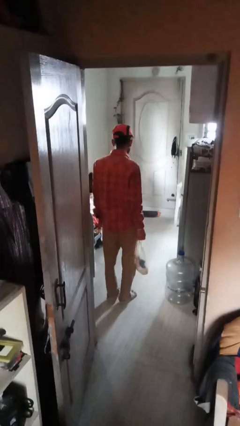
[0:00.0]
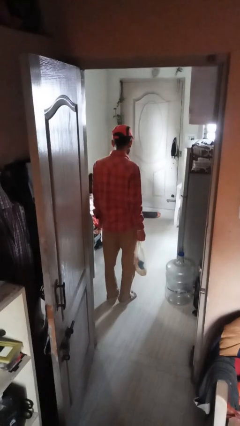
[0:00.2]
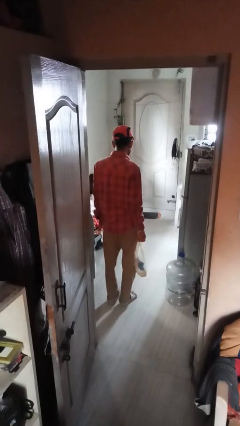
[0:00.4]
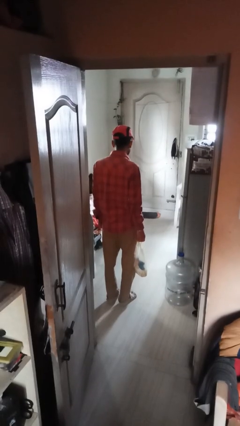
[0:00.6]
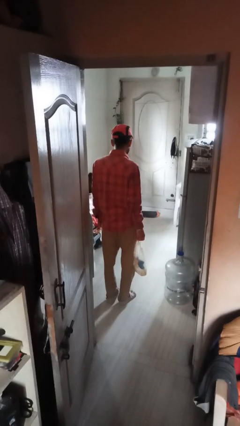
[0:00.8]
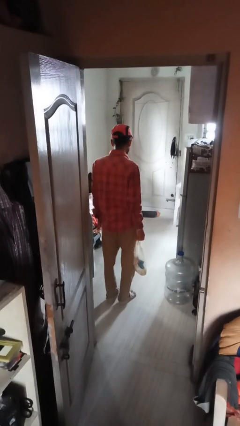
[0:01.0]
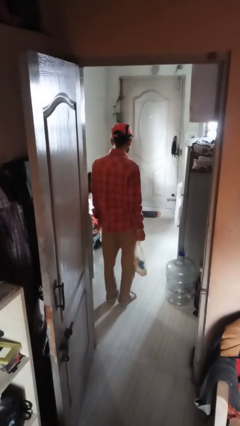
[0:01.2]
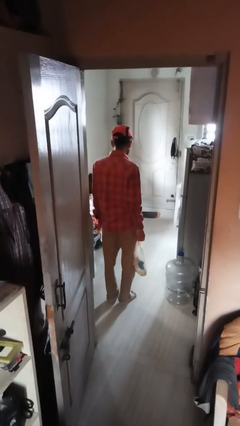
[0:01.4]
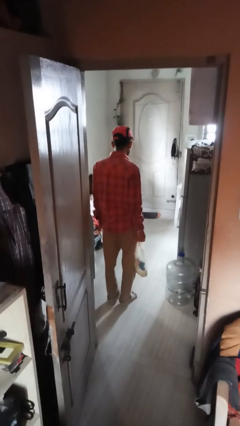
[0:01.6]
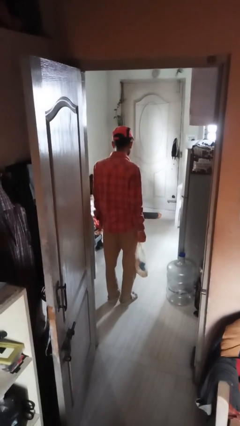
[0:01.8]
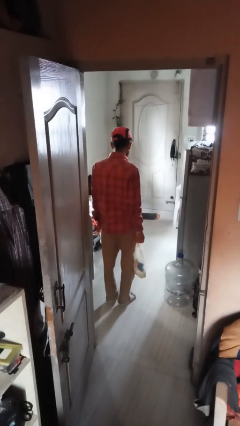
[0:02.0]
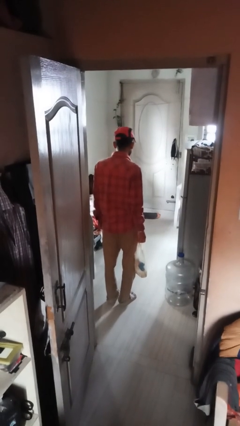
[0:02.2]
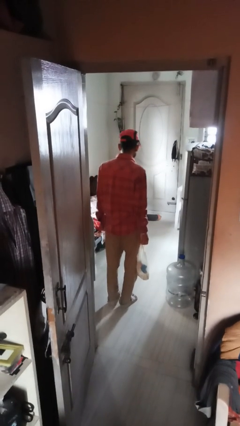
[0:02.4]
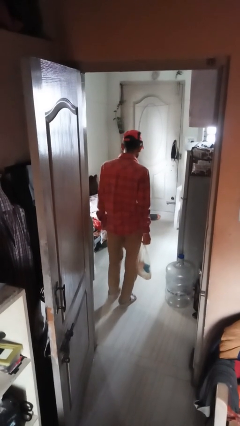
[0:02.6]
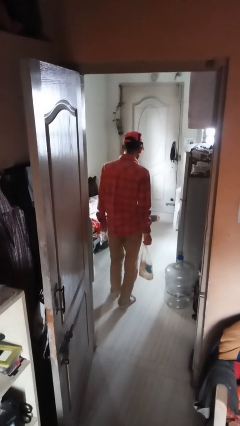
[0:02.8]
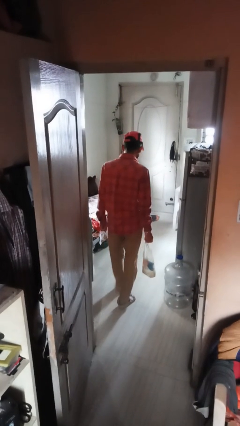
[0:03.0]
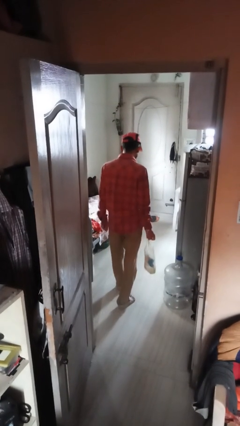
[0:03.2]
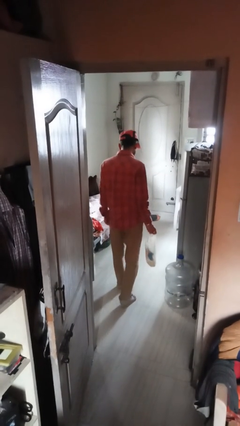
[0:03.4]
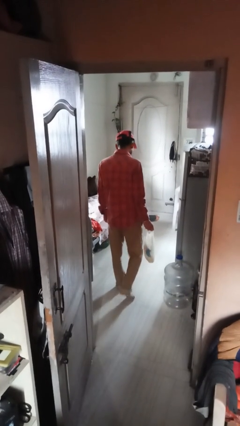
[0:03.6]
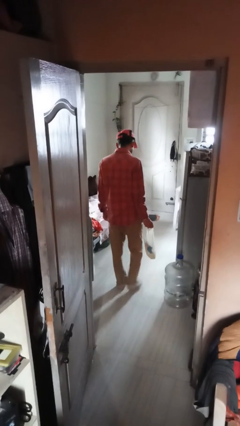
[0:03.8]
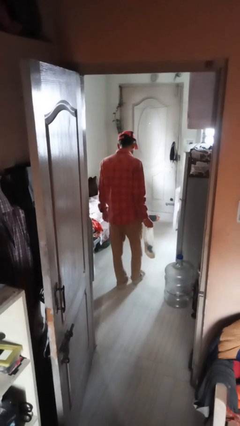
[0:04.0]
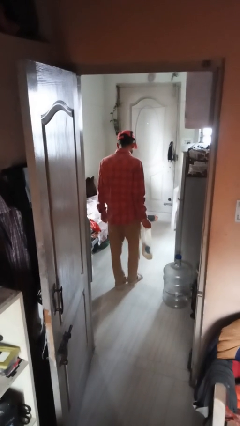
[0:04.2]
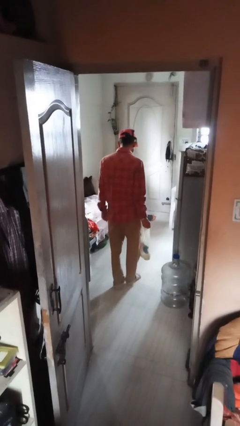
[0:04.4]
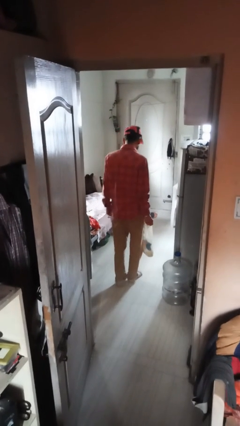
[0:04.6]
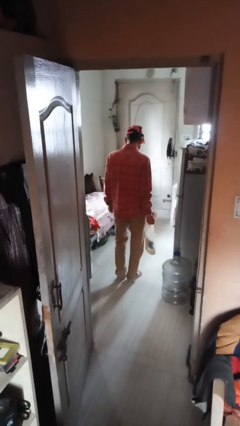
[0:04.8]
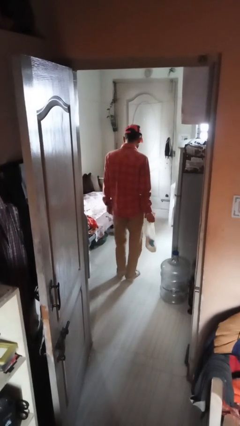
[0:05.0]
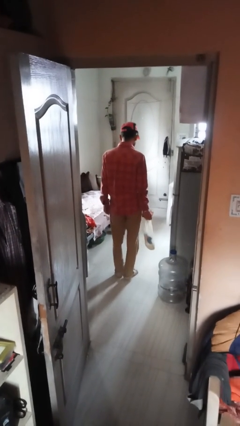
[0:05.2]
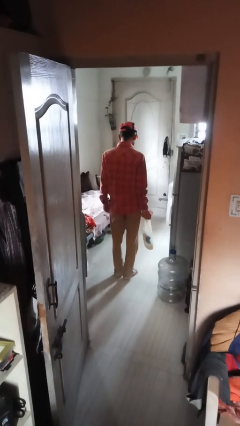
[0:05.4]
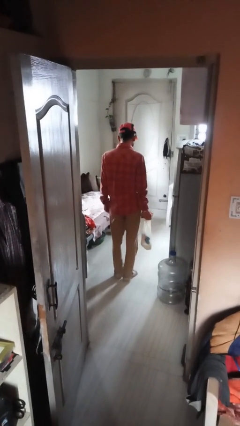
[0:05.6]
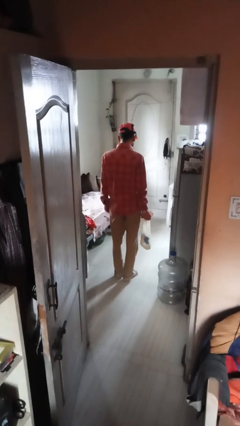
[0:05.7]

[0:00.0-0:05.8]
person carries groceries

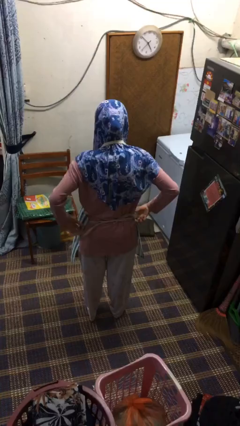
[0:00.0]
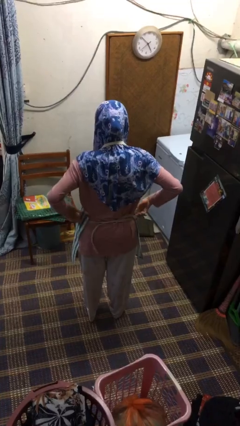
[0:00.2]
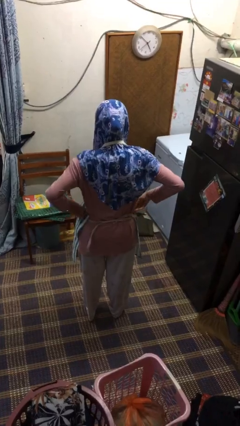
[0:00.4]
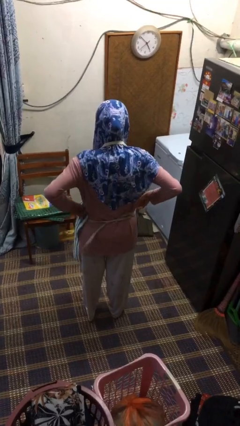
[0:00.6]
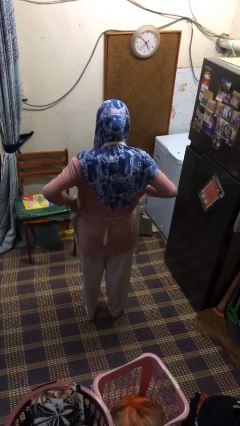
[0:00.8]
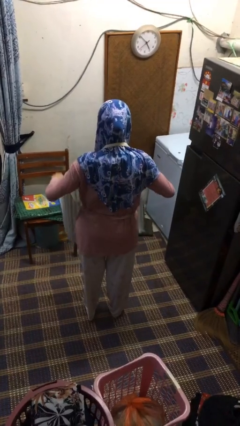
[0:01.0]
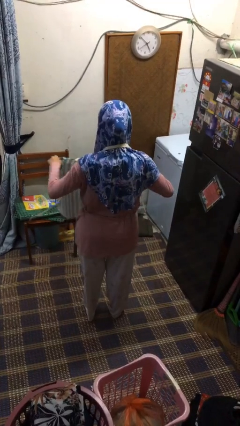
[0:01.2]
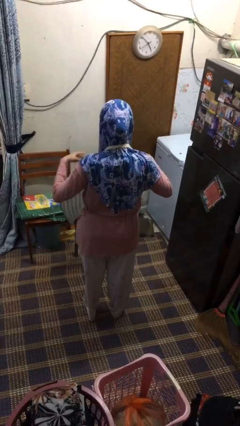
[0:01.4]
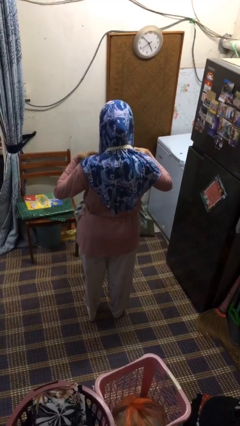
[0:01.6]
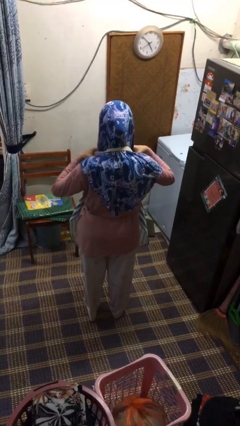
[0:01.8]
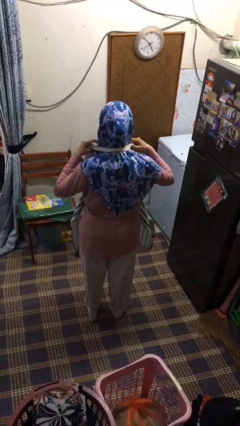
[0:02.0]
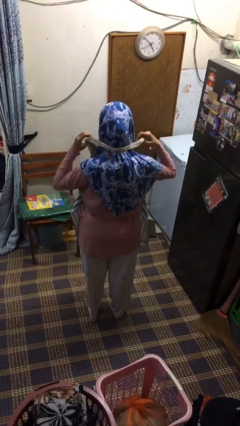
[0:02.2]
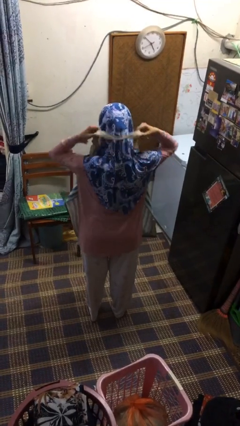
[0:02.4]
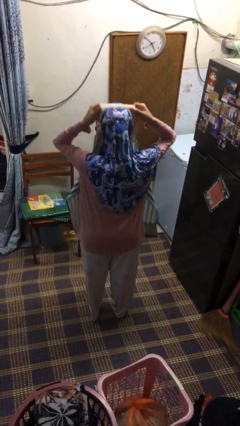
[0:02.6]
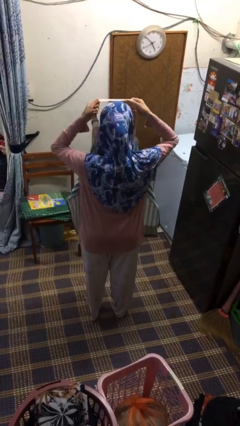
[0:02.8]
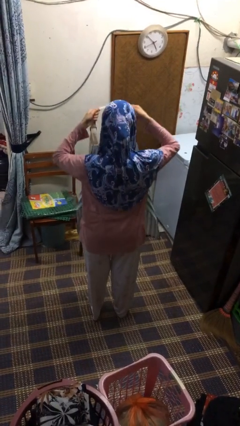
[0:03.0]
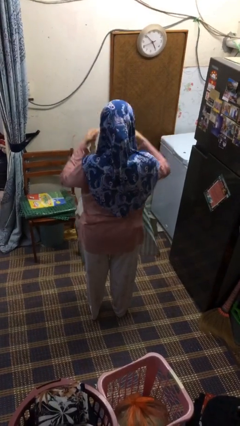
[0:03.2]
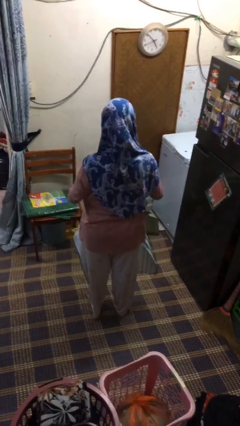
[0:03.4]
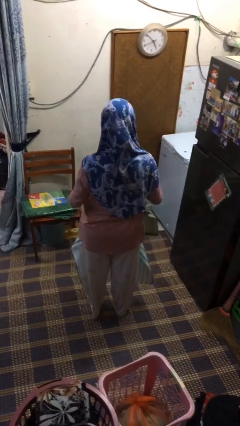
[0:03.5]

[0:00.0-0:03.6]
person takes off apron

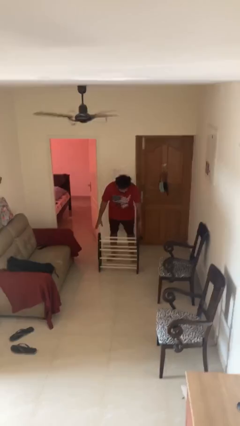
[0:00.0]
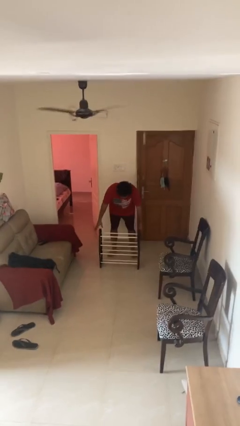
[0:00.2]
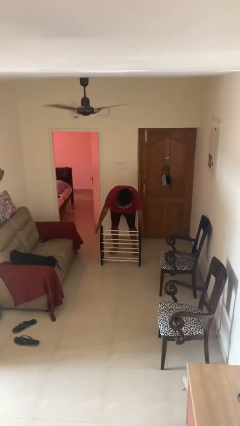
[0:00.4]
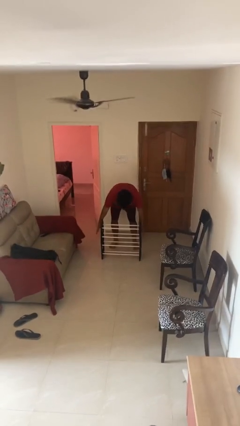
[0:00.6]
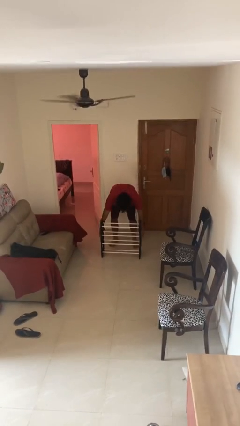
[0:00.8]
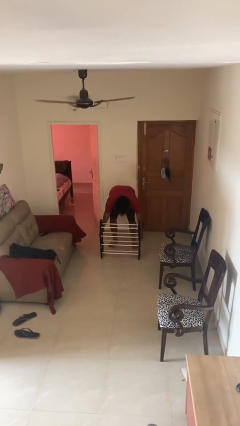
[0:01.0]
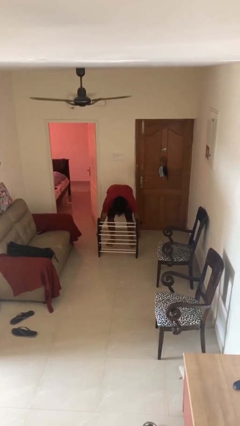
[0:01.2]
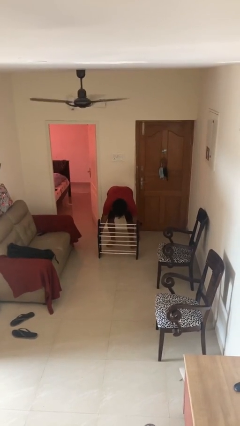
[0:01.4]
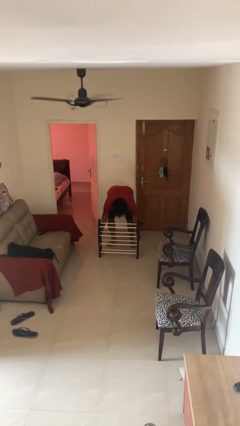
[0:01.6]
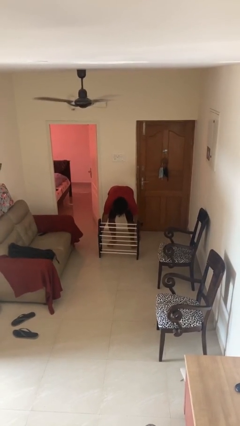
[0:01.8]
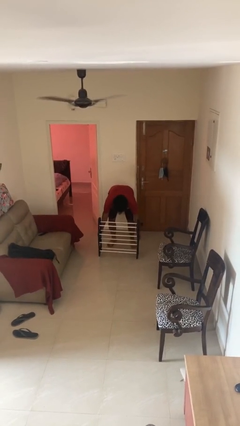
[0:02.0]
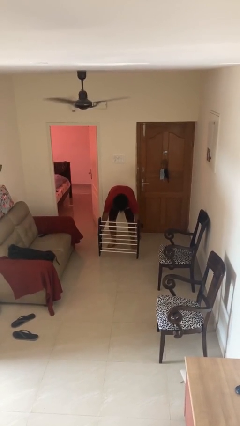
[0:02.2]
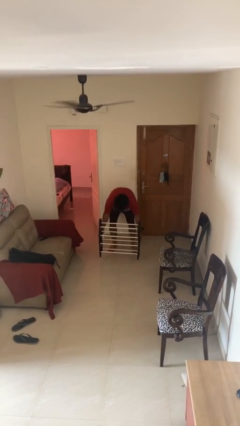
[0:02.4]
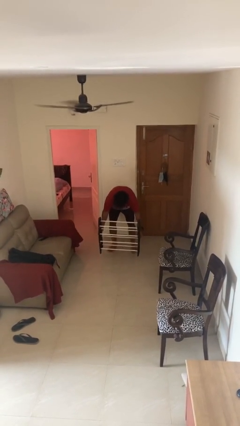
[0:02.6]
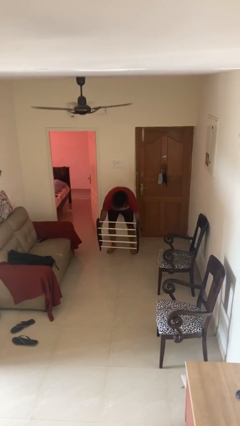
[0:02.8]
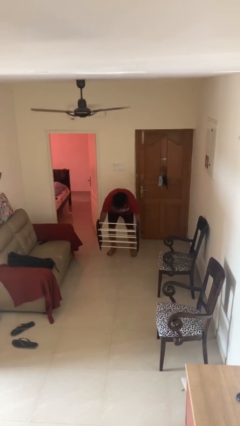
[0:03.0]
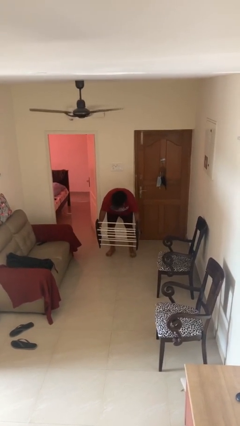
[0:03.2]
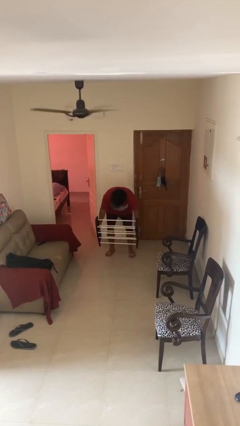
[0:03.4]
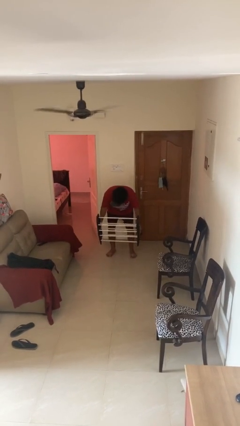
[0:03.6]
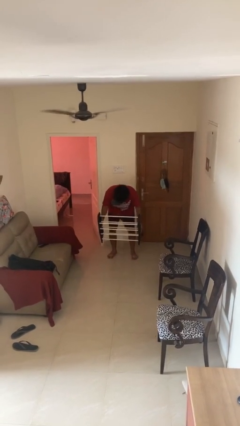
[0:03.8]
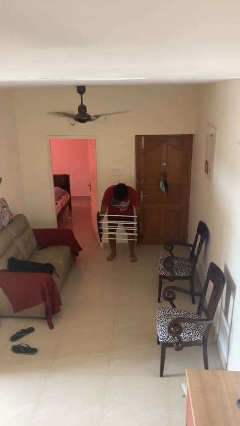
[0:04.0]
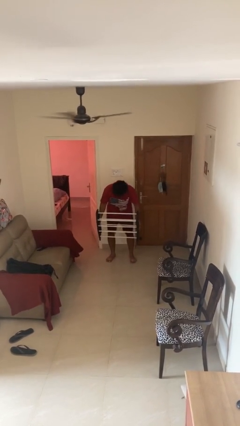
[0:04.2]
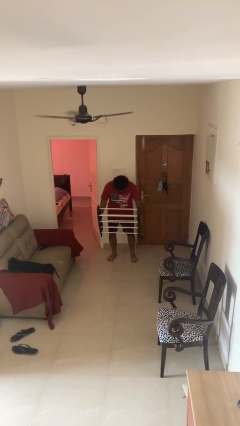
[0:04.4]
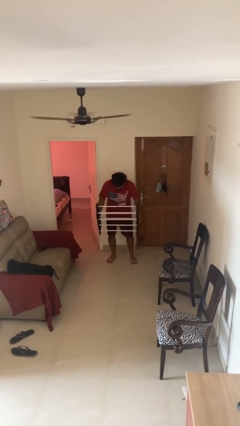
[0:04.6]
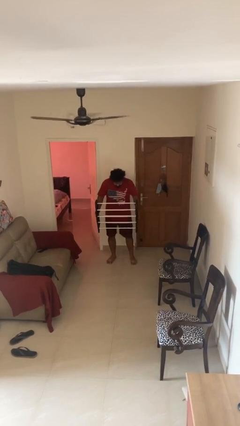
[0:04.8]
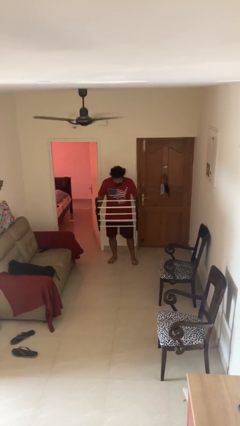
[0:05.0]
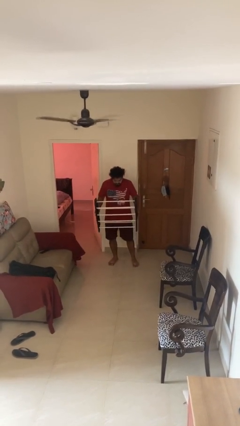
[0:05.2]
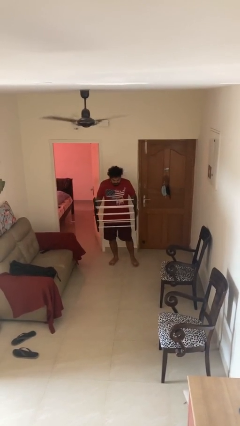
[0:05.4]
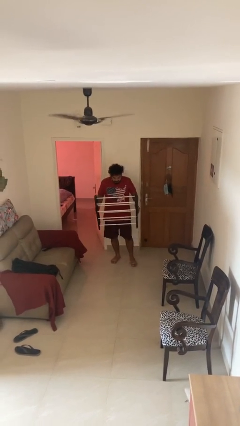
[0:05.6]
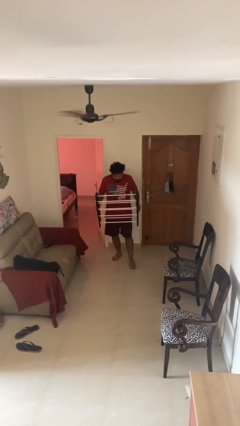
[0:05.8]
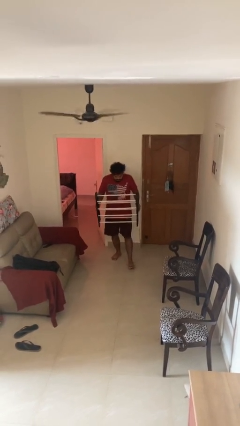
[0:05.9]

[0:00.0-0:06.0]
person picks up object from floor

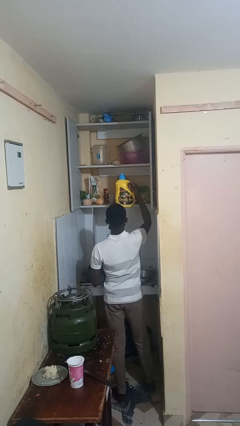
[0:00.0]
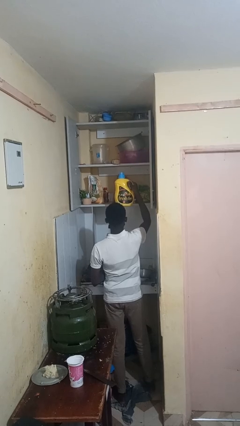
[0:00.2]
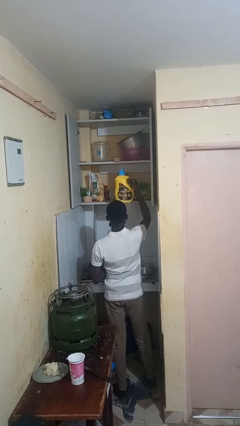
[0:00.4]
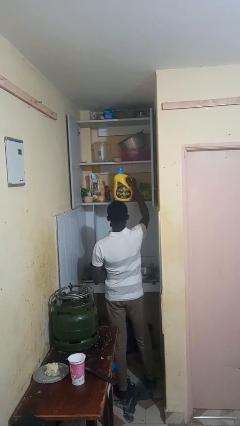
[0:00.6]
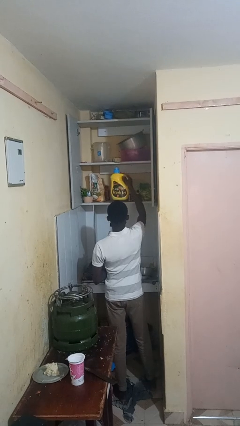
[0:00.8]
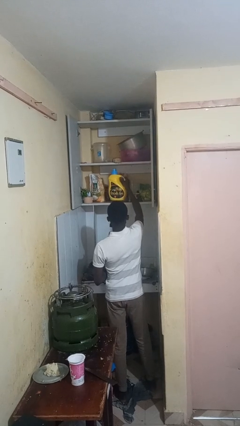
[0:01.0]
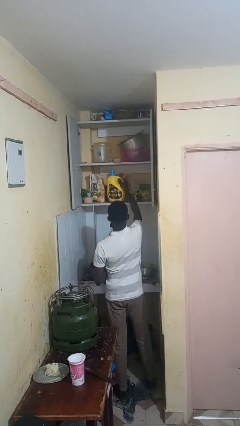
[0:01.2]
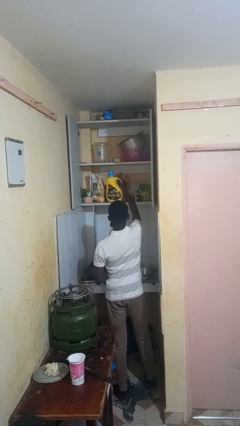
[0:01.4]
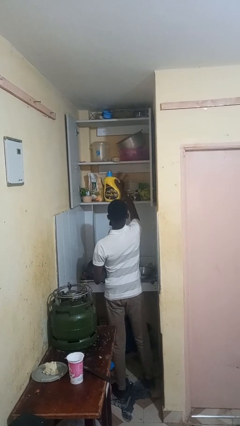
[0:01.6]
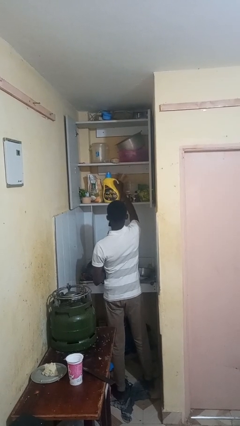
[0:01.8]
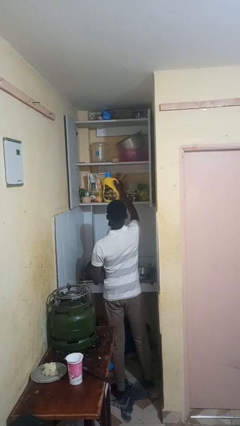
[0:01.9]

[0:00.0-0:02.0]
person puts down object on countertop

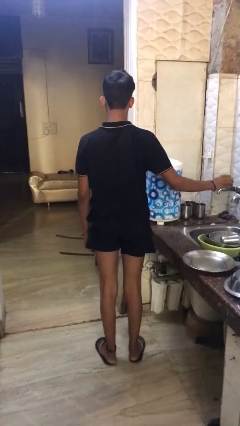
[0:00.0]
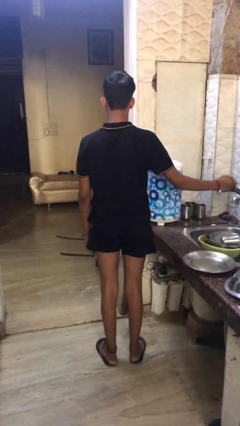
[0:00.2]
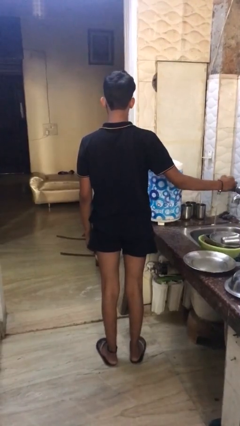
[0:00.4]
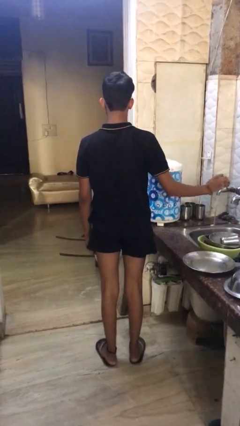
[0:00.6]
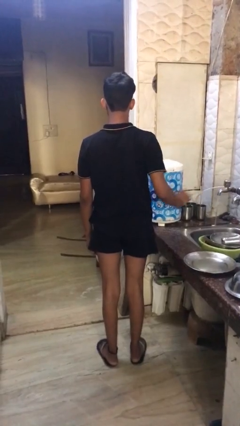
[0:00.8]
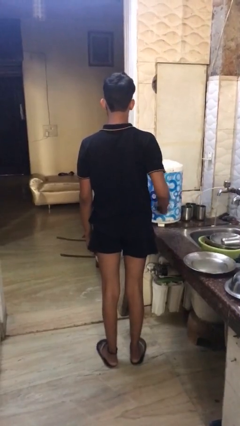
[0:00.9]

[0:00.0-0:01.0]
person turns on faucet
